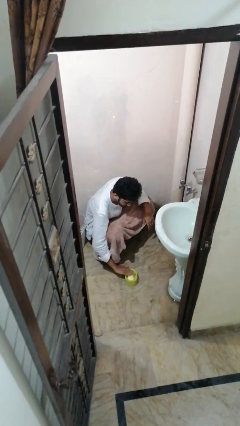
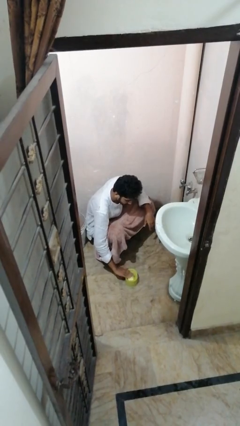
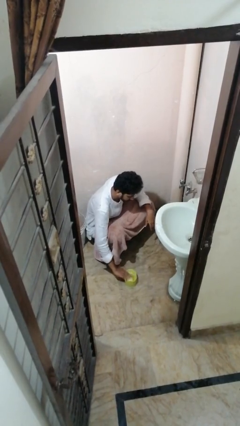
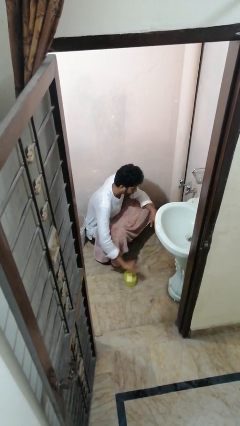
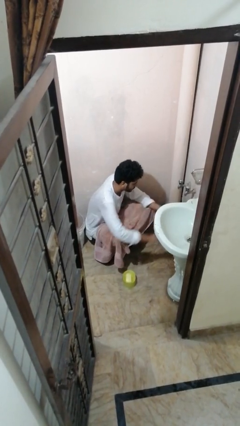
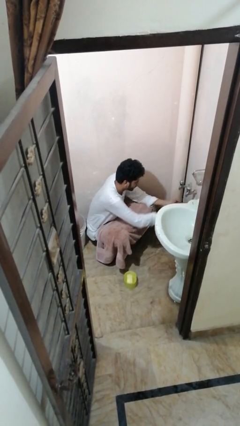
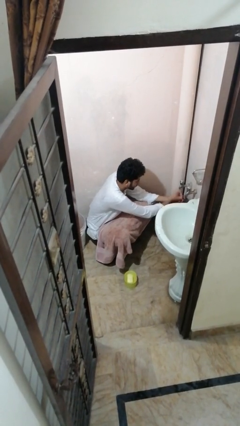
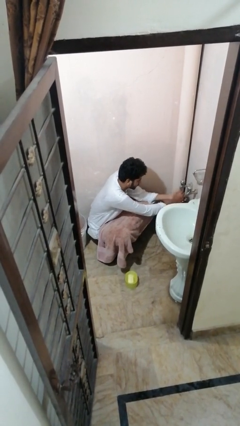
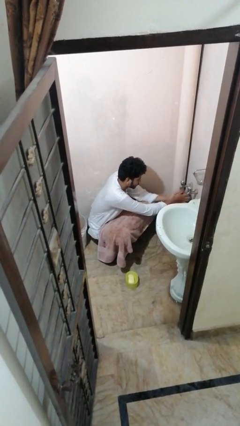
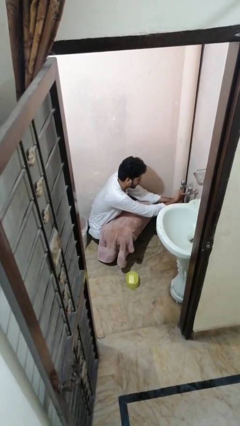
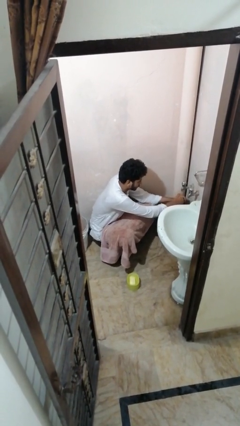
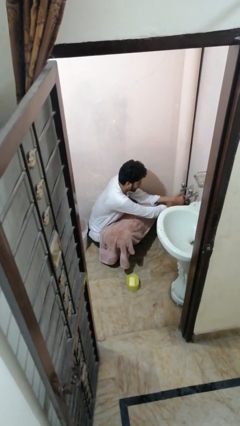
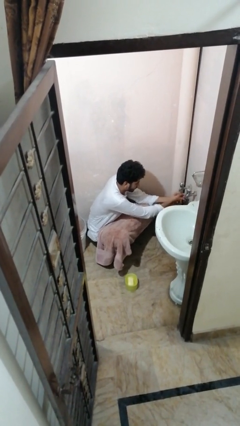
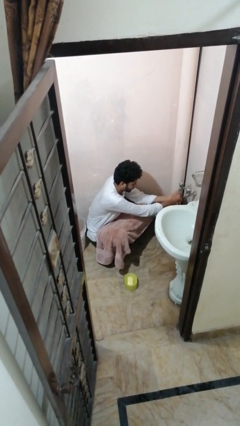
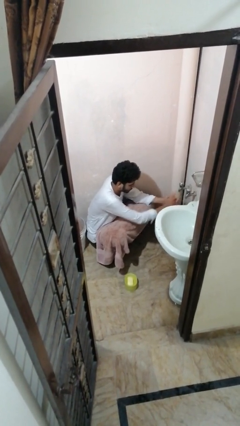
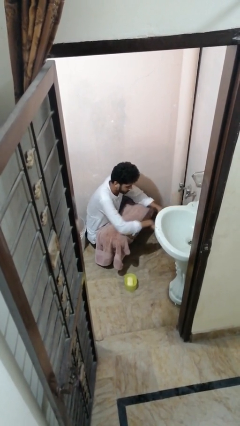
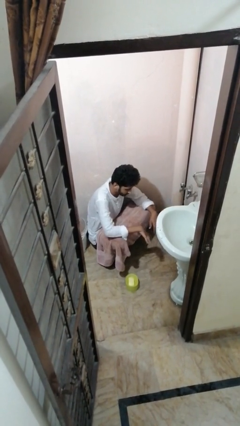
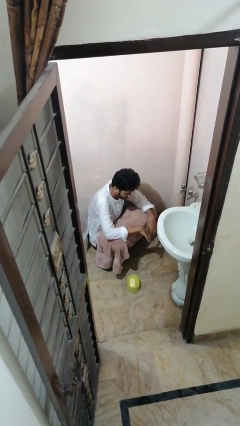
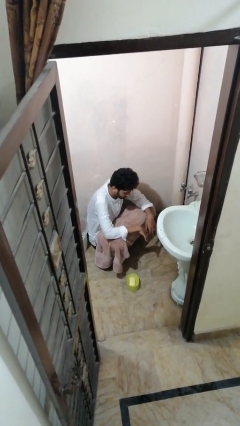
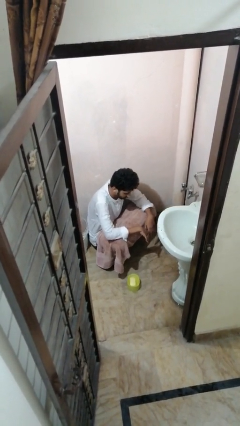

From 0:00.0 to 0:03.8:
person washes hands

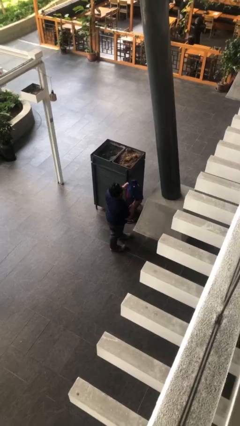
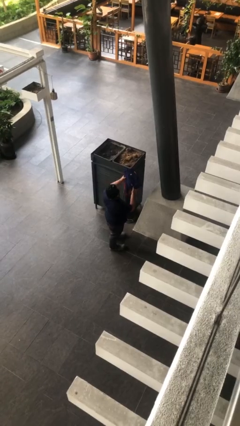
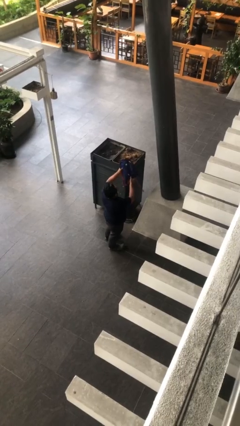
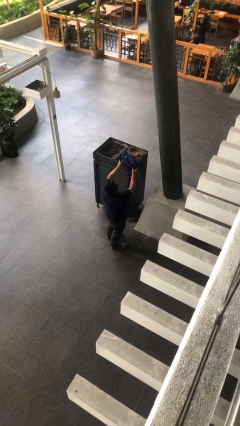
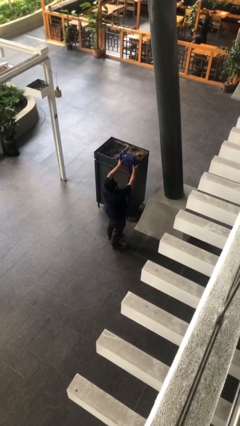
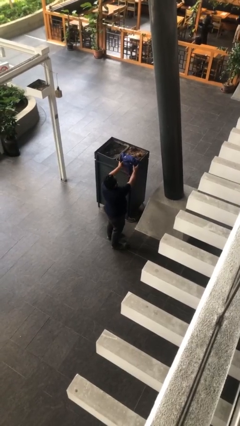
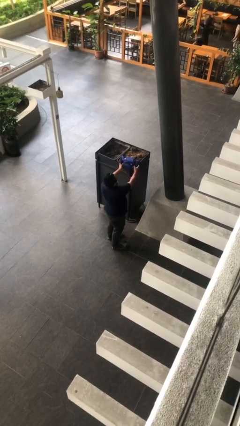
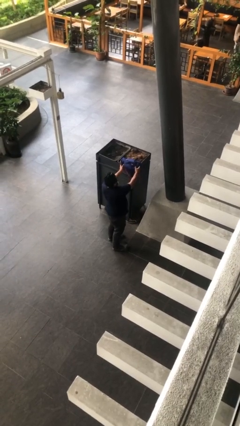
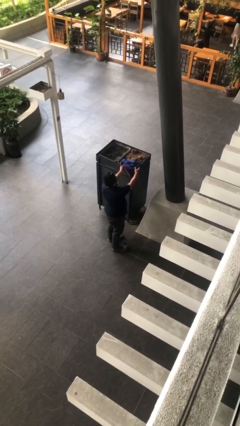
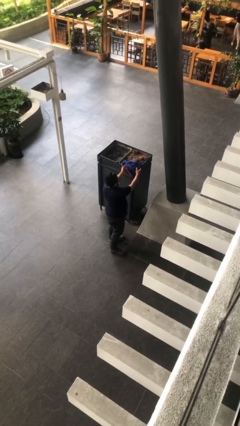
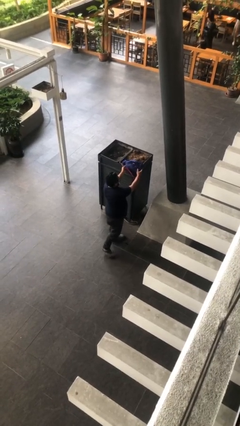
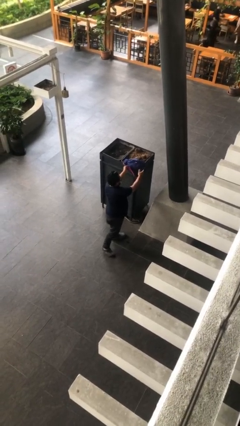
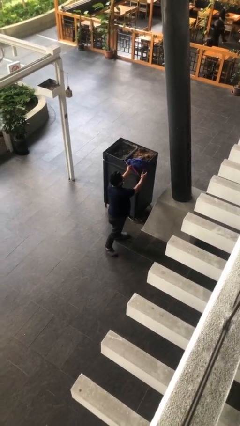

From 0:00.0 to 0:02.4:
person puts down object on shelf

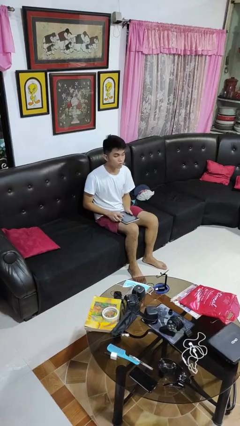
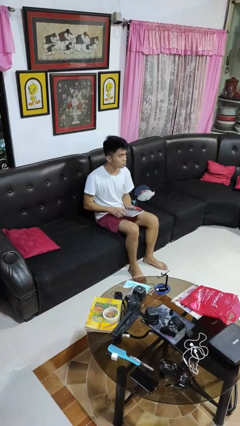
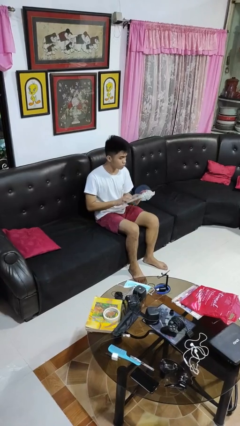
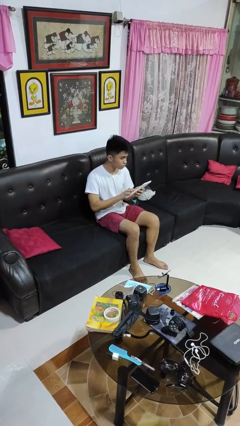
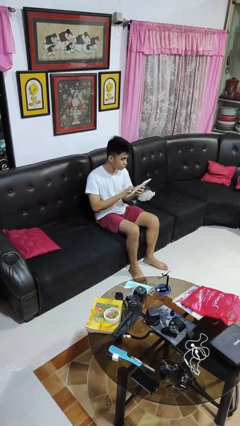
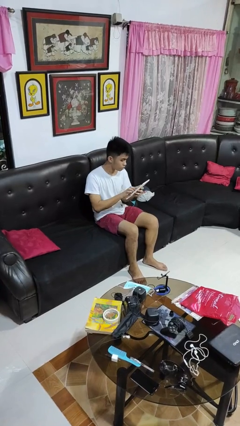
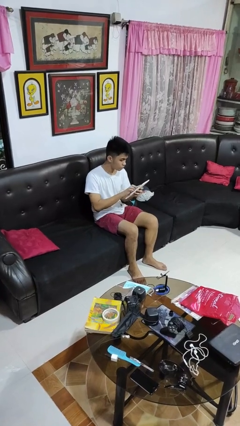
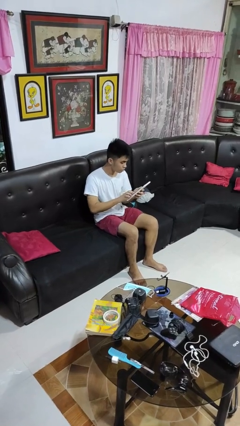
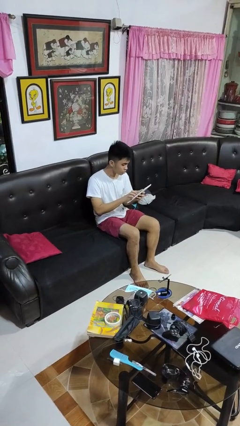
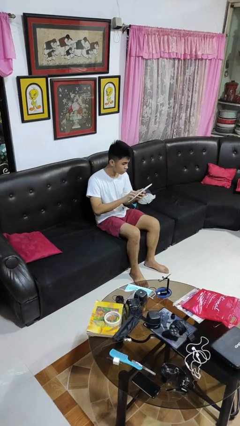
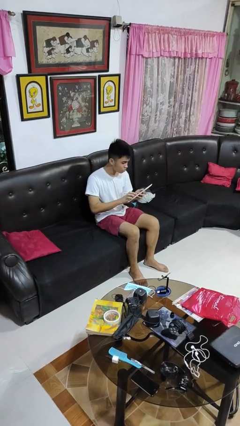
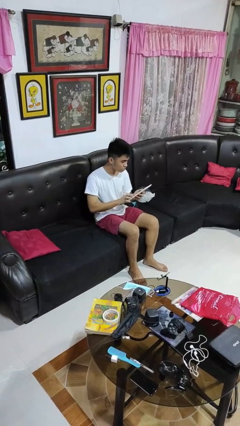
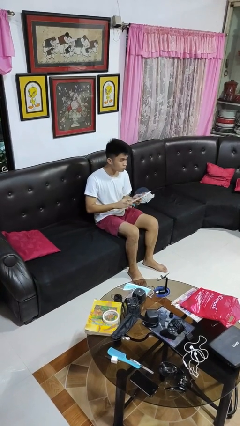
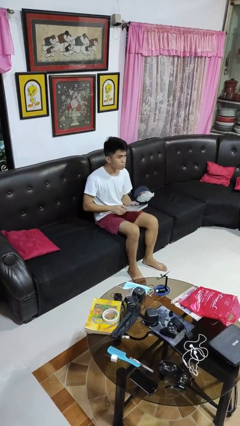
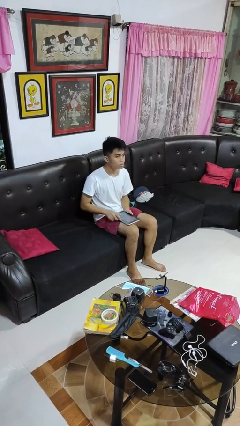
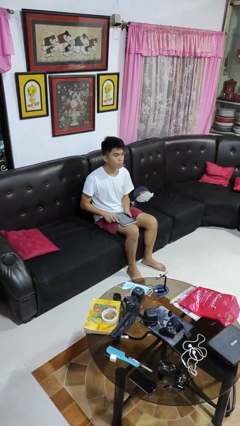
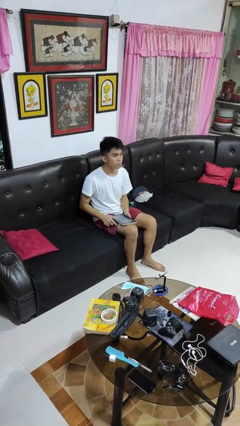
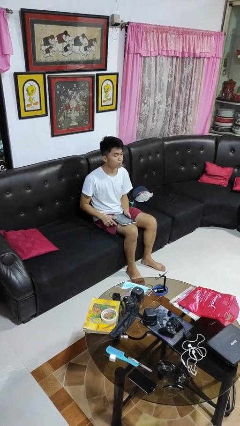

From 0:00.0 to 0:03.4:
person interacts with tablet

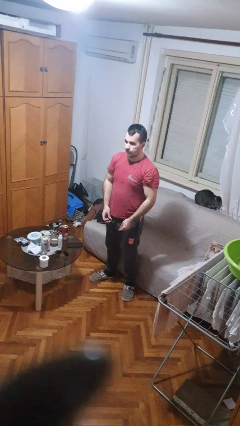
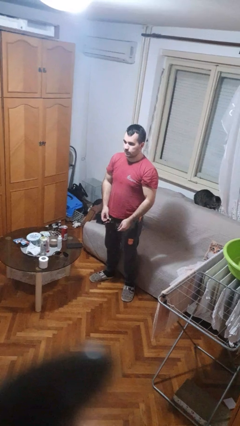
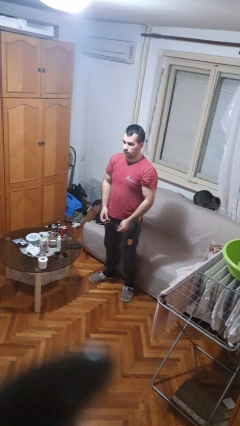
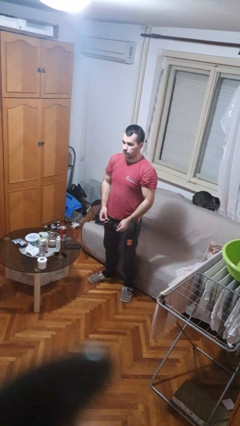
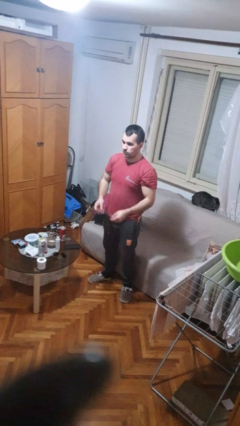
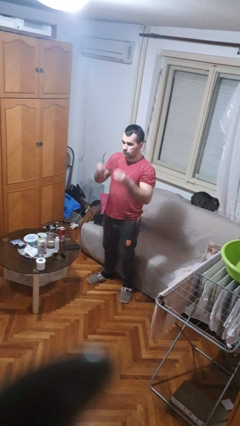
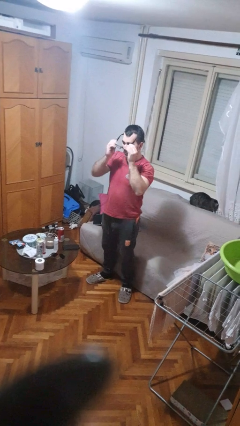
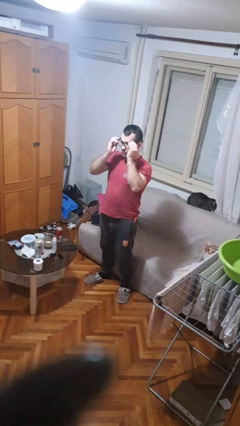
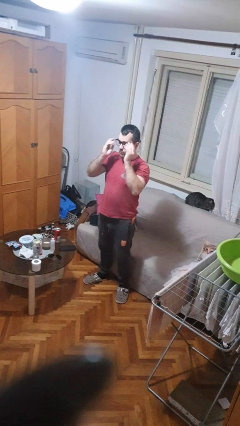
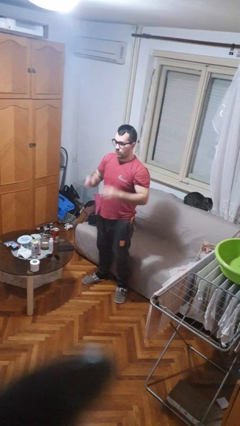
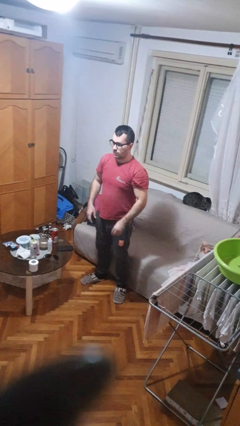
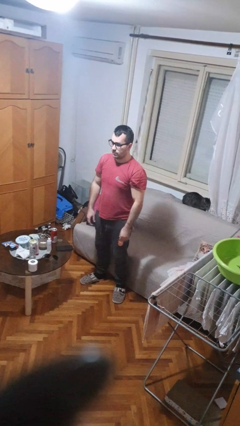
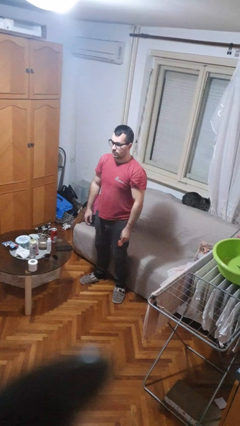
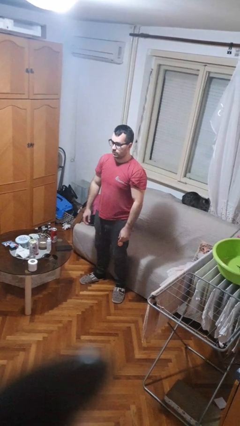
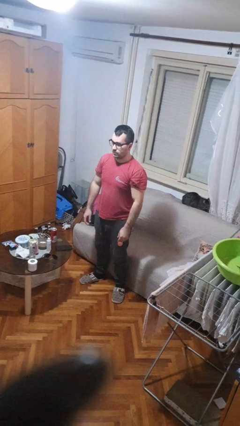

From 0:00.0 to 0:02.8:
person puts on glasses

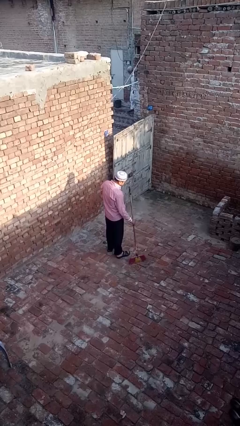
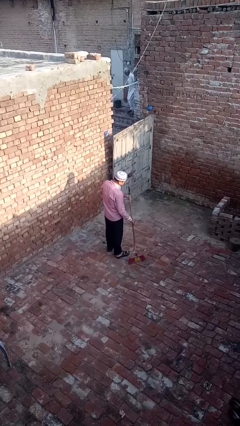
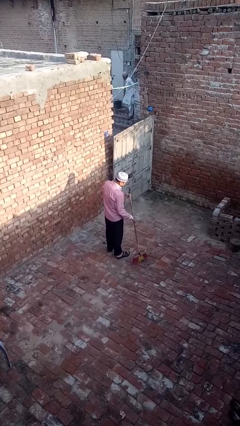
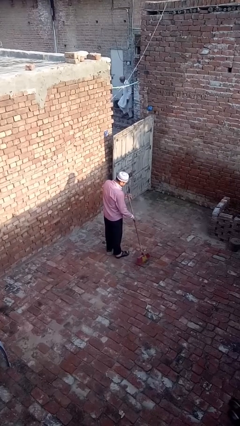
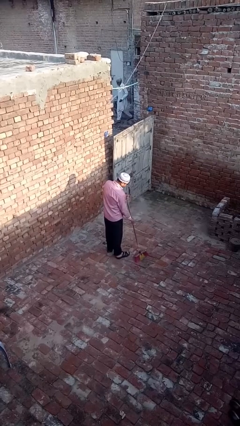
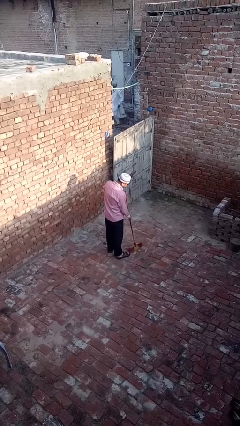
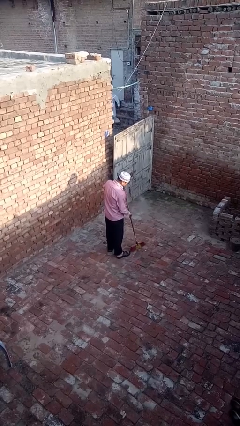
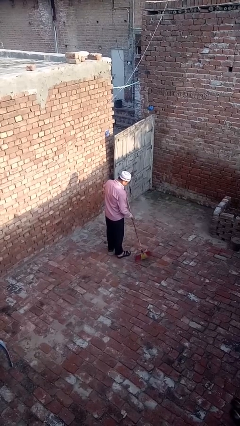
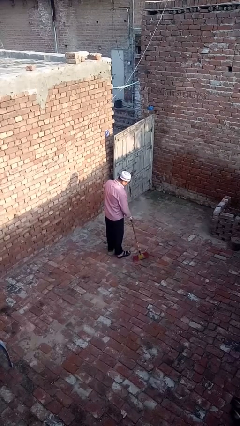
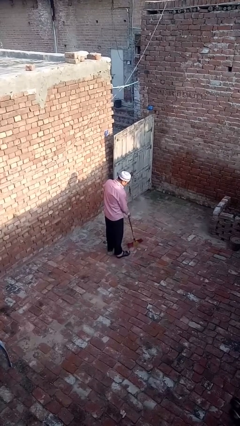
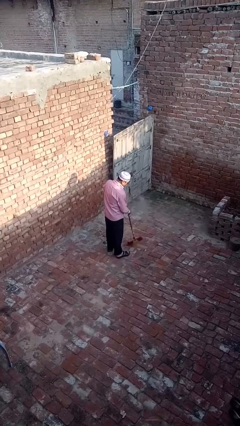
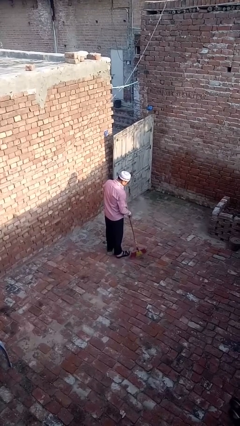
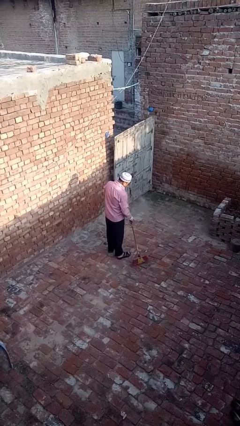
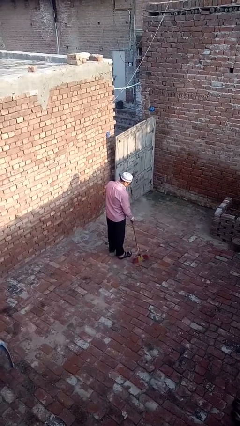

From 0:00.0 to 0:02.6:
person sweeps floor

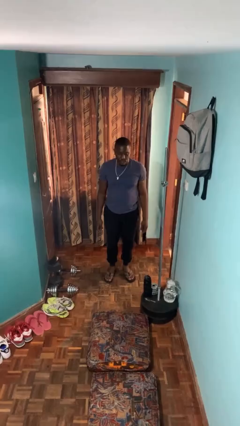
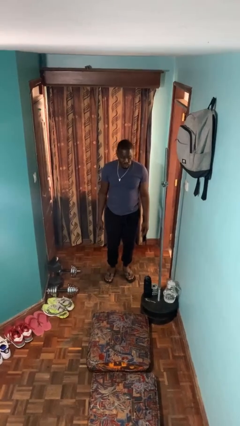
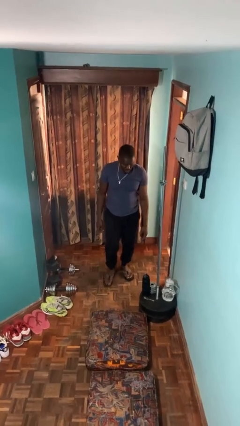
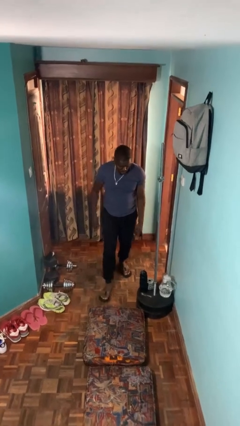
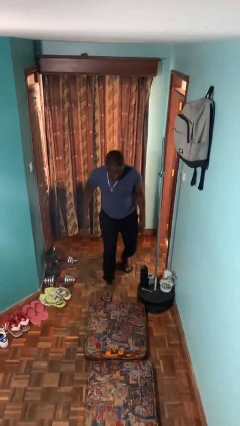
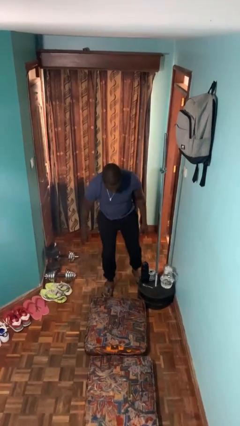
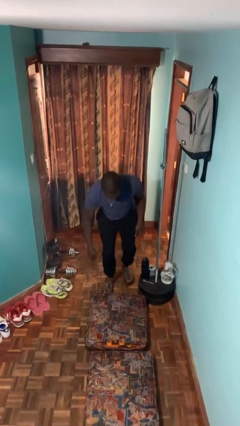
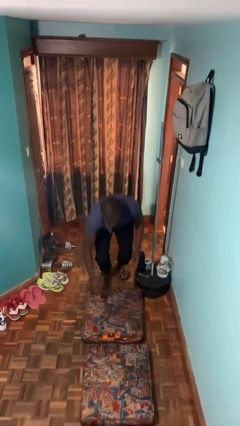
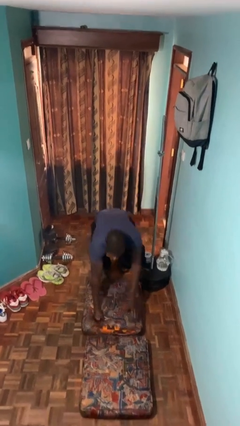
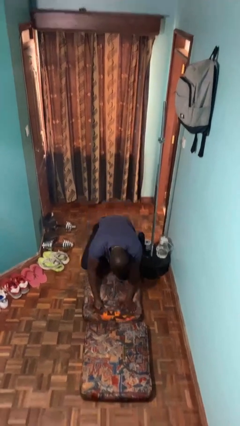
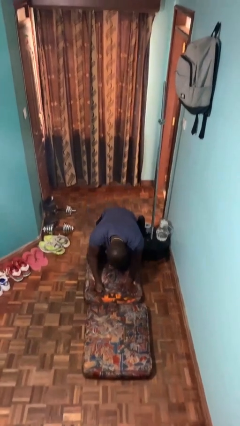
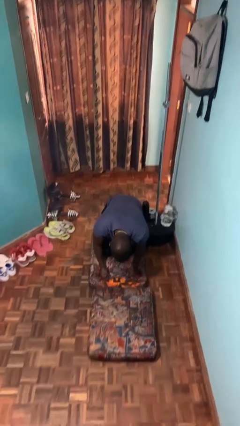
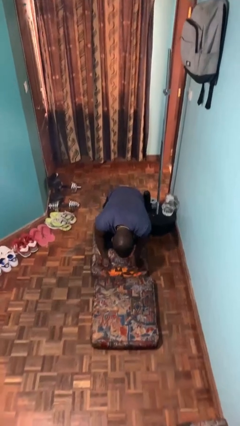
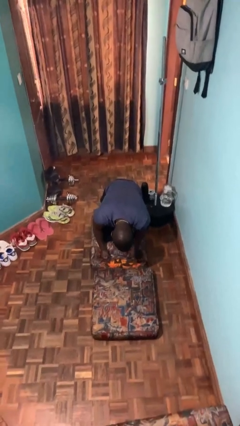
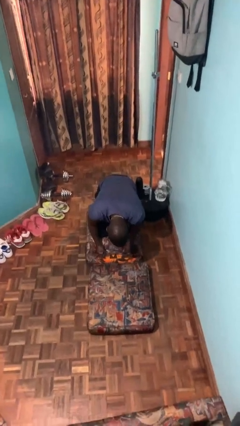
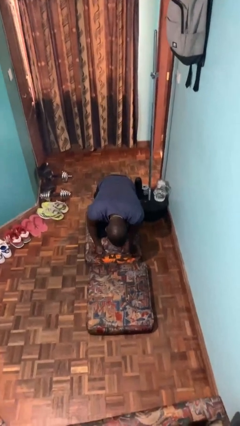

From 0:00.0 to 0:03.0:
person trips on object on floor
